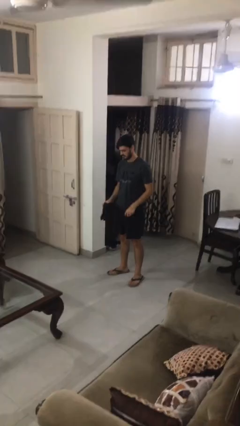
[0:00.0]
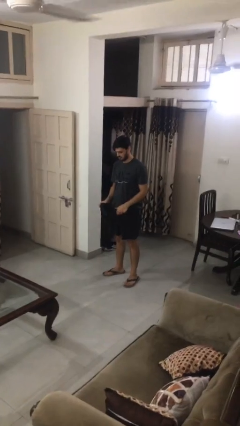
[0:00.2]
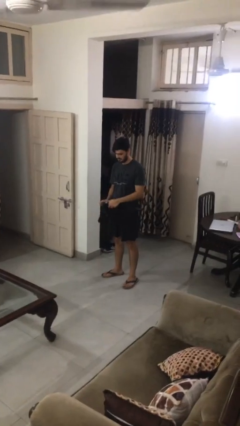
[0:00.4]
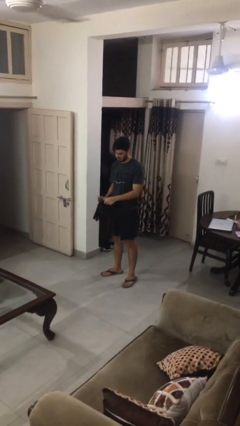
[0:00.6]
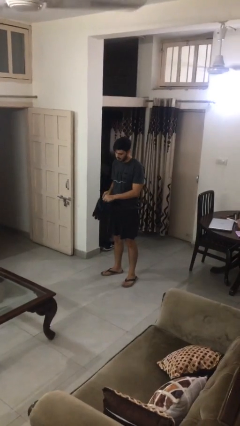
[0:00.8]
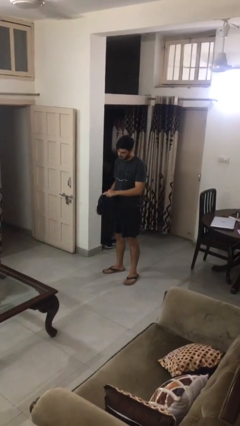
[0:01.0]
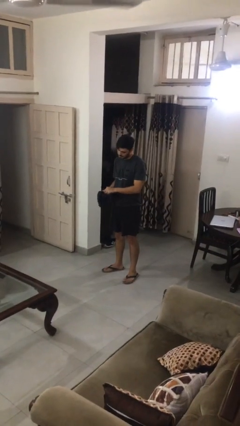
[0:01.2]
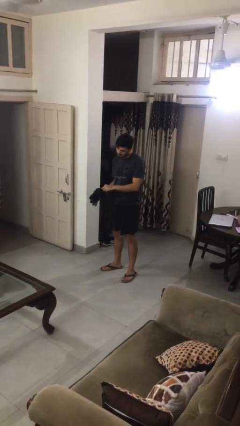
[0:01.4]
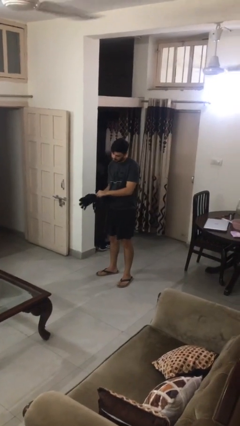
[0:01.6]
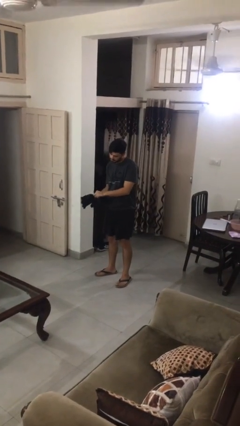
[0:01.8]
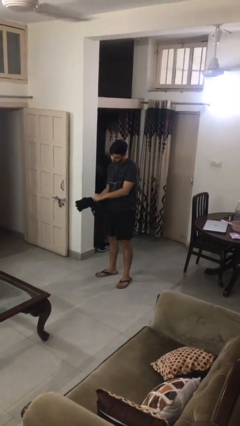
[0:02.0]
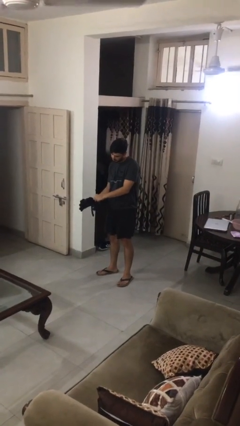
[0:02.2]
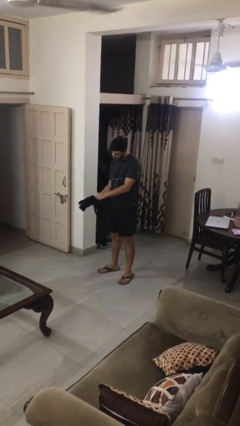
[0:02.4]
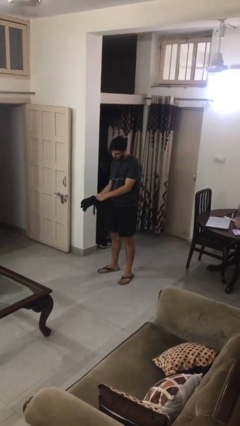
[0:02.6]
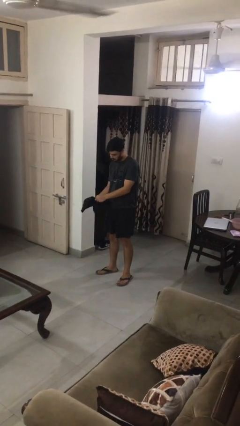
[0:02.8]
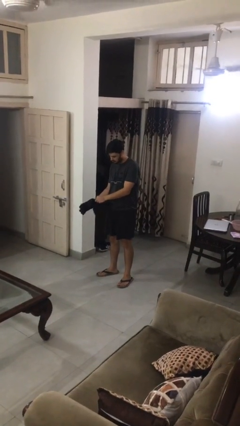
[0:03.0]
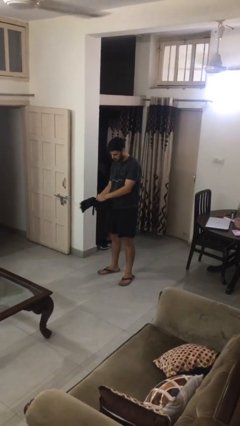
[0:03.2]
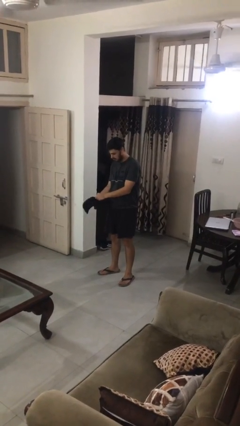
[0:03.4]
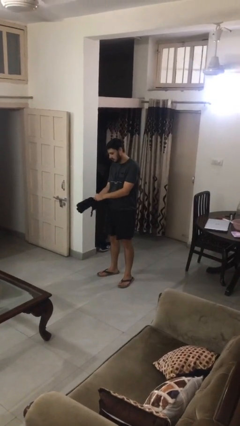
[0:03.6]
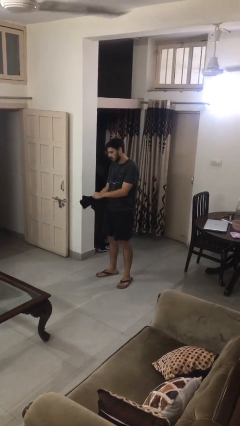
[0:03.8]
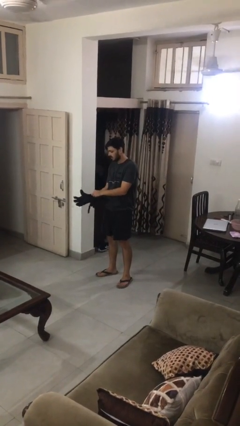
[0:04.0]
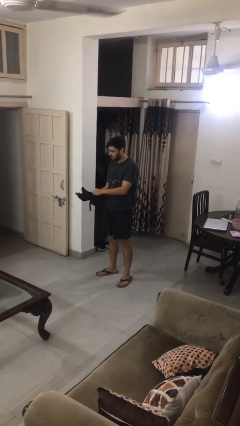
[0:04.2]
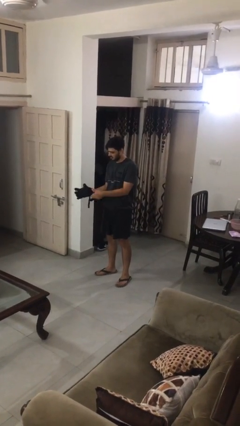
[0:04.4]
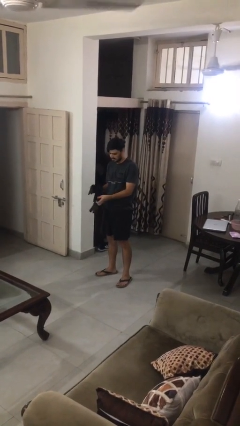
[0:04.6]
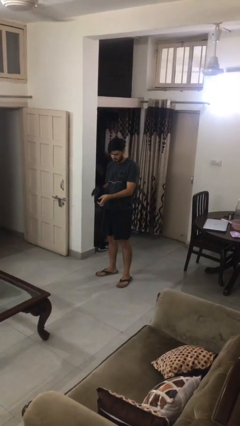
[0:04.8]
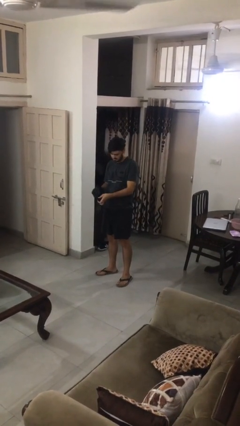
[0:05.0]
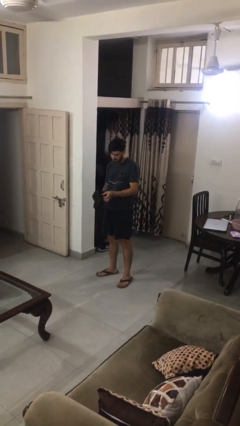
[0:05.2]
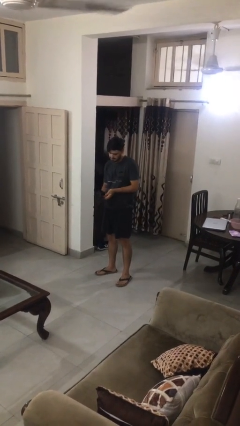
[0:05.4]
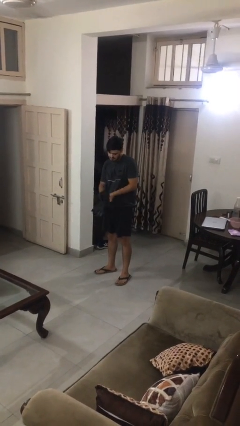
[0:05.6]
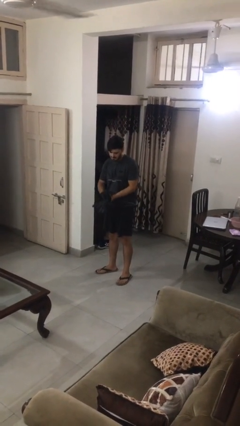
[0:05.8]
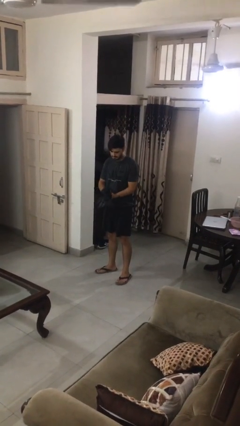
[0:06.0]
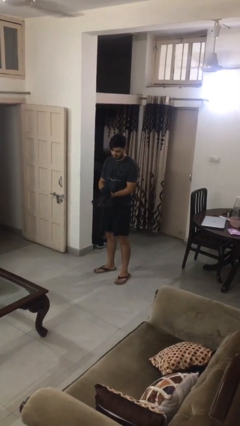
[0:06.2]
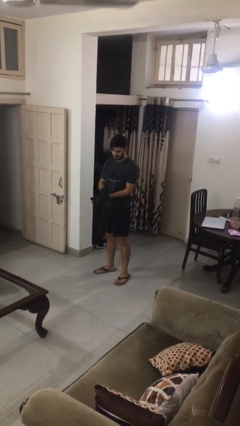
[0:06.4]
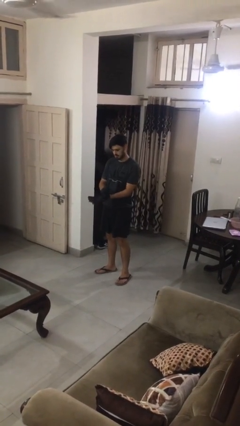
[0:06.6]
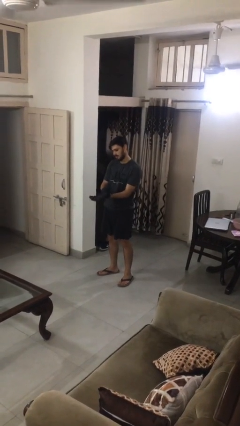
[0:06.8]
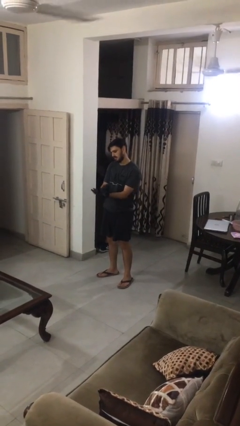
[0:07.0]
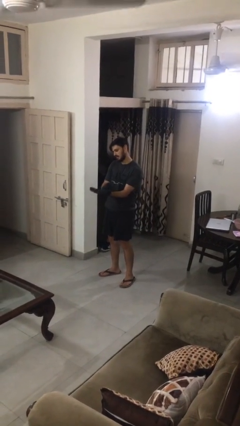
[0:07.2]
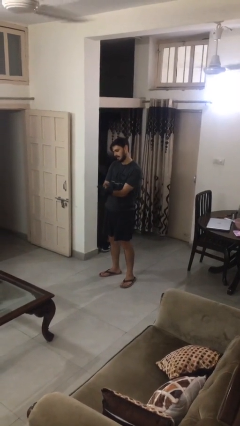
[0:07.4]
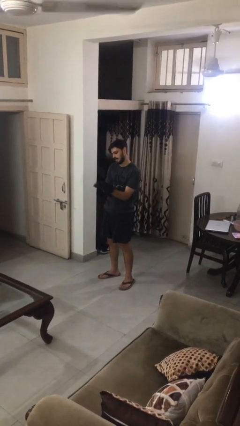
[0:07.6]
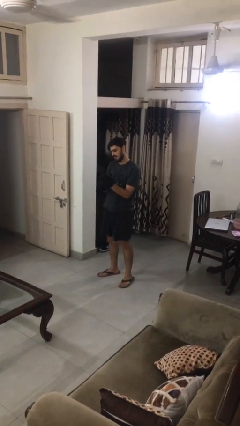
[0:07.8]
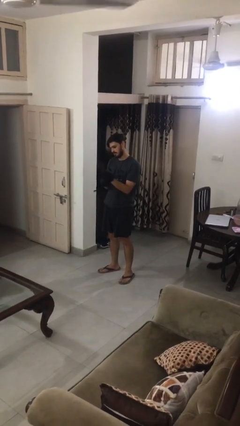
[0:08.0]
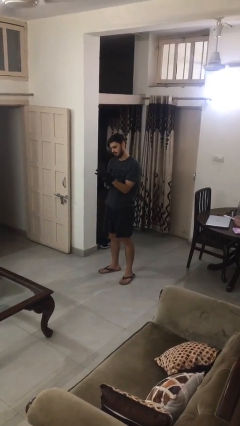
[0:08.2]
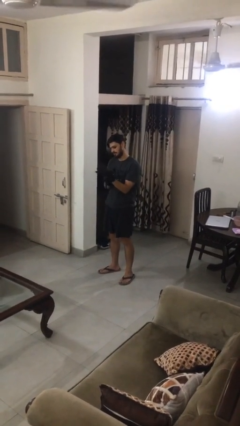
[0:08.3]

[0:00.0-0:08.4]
person puts on gloves

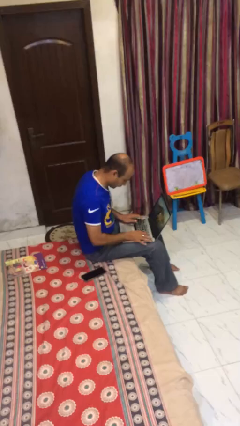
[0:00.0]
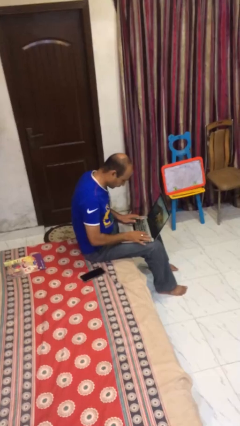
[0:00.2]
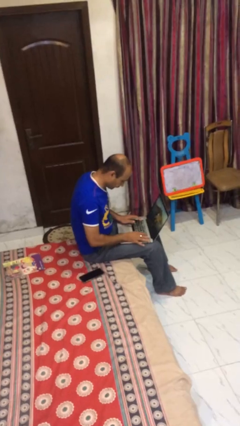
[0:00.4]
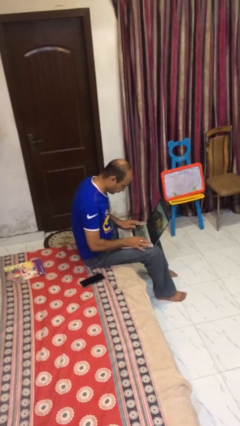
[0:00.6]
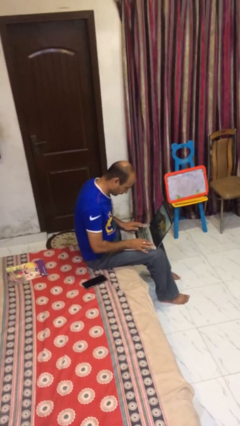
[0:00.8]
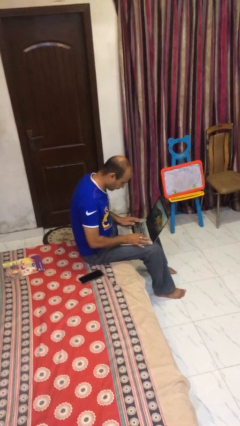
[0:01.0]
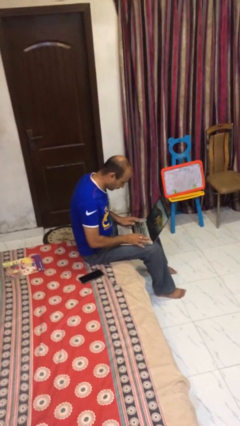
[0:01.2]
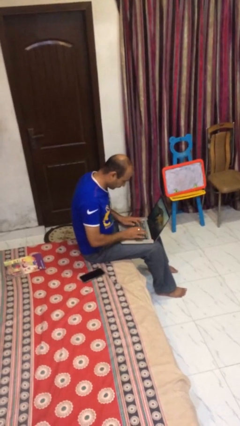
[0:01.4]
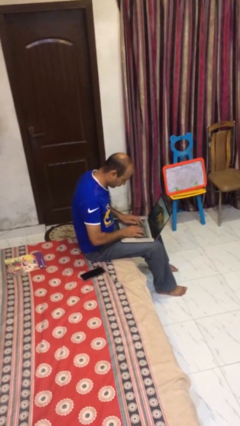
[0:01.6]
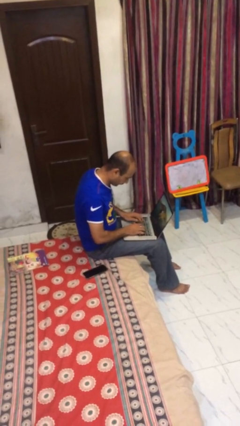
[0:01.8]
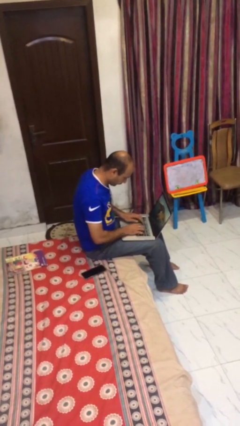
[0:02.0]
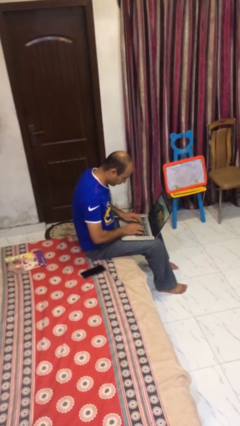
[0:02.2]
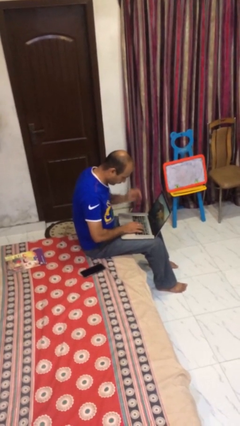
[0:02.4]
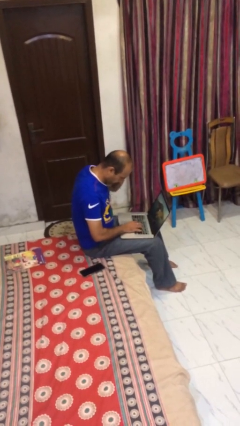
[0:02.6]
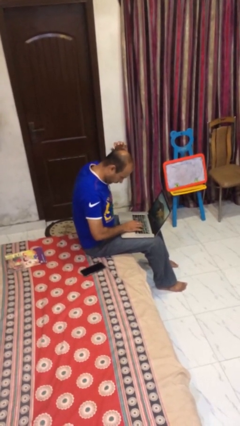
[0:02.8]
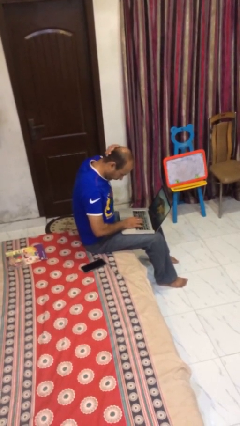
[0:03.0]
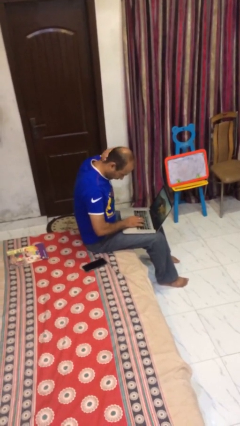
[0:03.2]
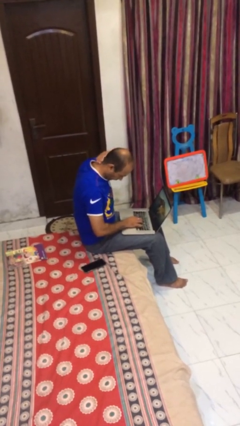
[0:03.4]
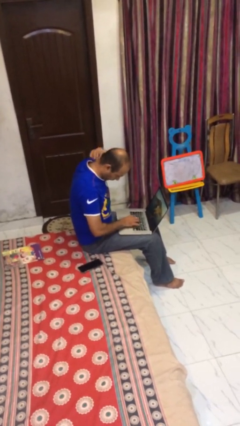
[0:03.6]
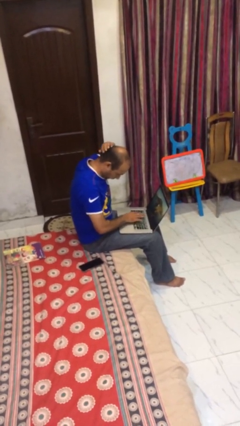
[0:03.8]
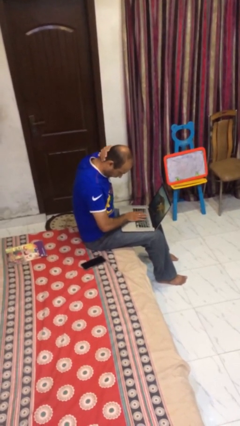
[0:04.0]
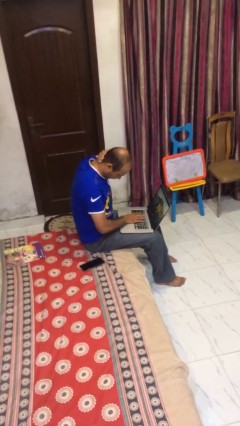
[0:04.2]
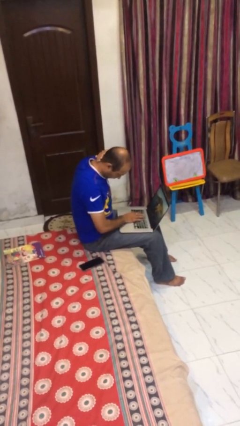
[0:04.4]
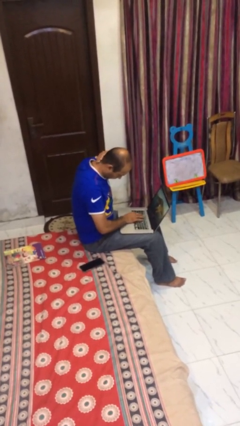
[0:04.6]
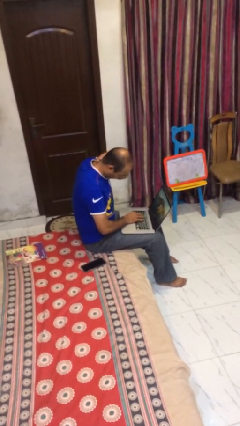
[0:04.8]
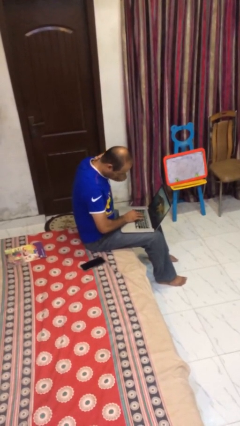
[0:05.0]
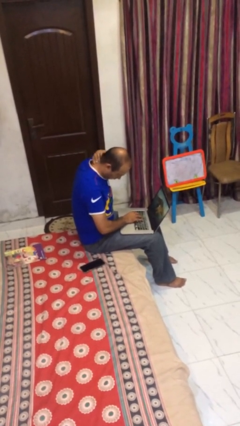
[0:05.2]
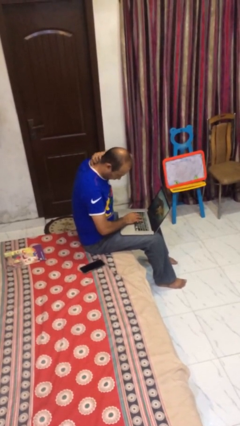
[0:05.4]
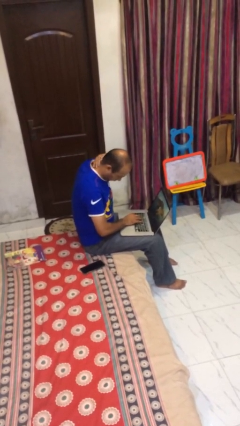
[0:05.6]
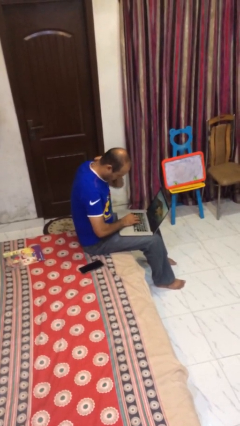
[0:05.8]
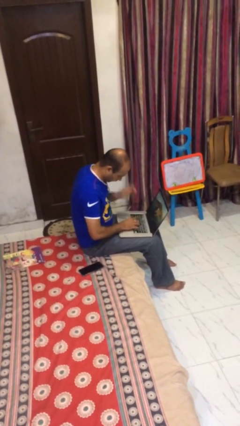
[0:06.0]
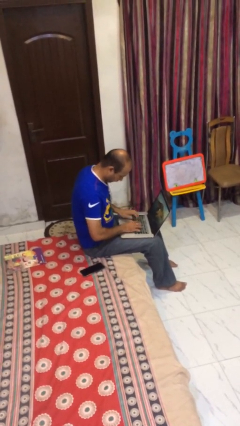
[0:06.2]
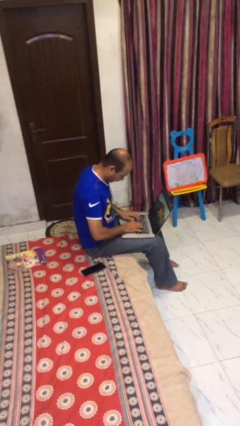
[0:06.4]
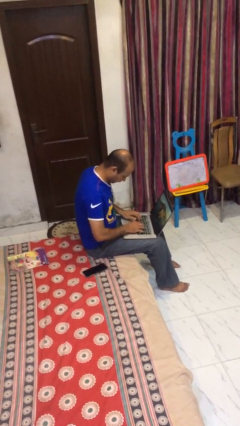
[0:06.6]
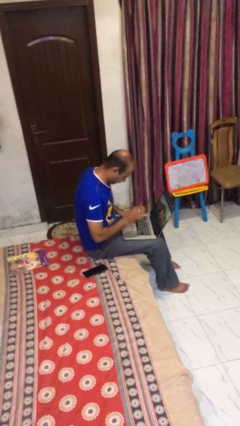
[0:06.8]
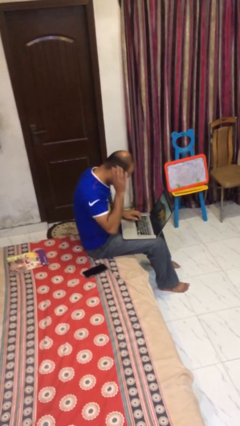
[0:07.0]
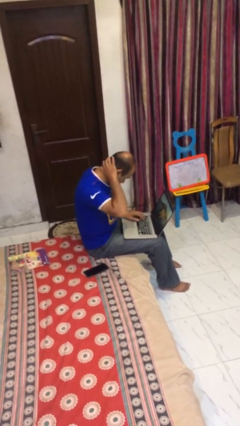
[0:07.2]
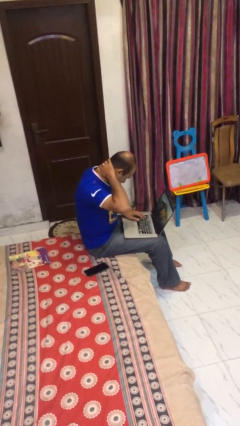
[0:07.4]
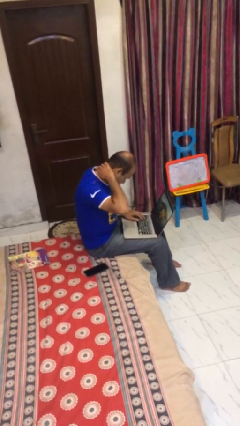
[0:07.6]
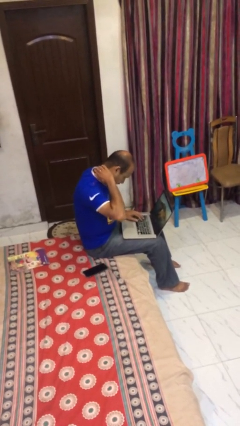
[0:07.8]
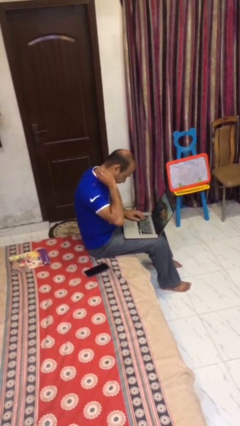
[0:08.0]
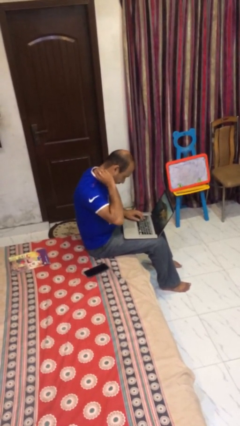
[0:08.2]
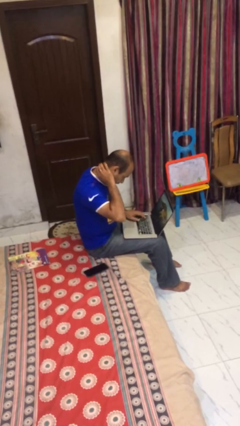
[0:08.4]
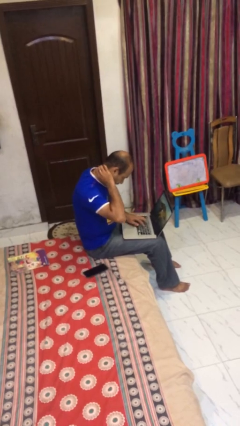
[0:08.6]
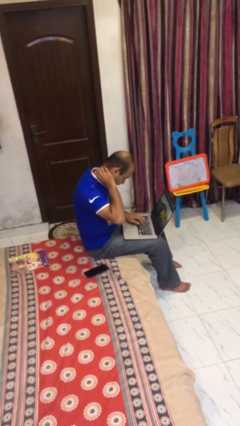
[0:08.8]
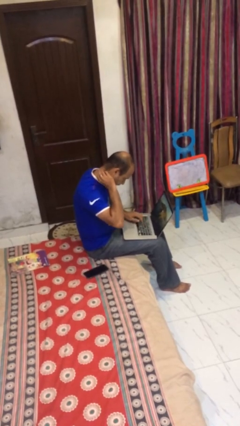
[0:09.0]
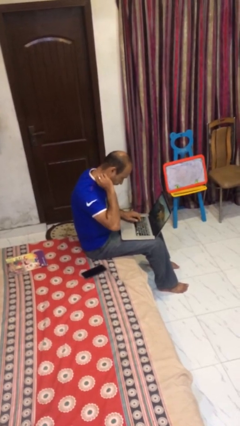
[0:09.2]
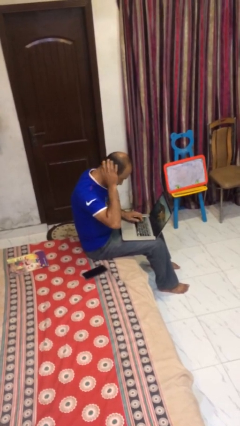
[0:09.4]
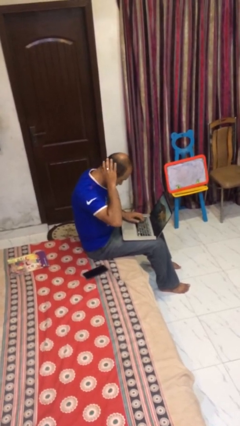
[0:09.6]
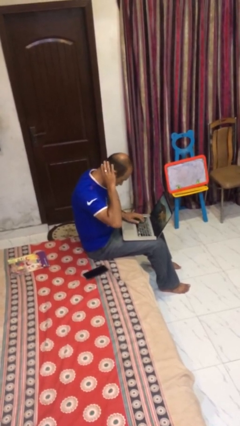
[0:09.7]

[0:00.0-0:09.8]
person interacts with laptop
